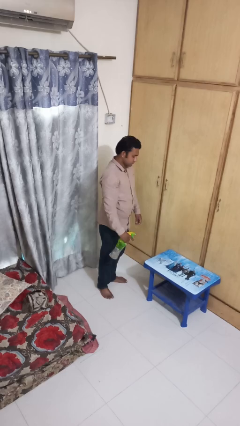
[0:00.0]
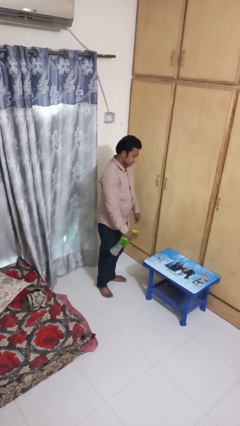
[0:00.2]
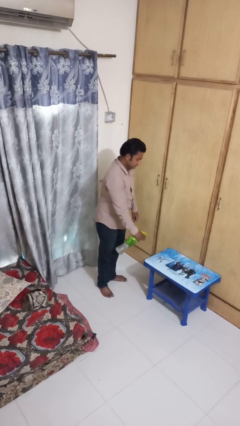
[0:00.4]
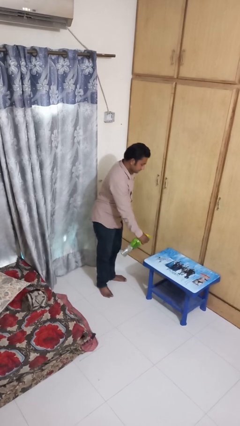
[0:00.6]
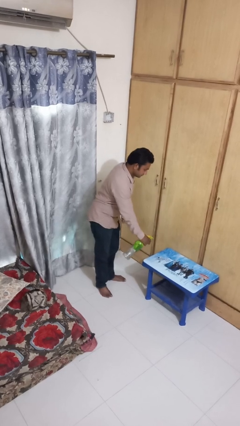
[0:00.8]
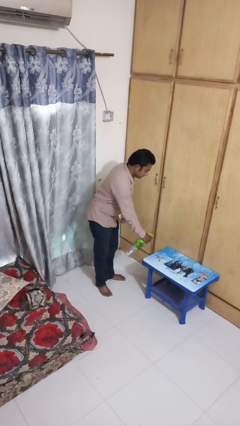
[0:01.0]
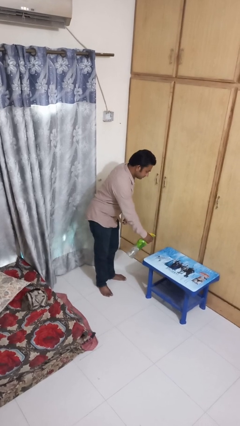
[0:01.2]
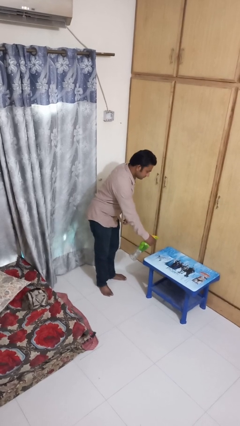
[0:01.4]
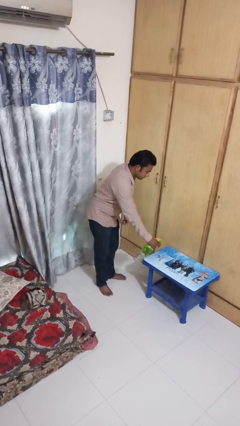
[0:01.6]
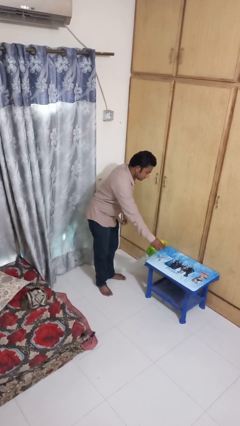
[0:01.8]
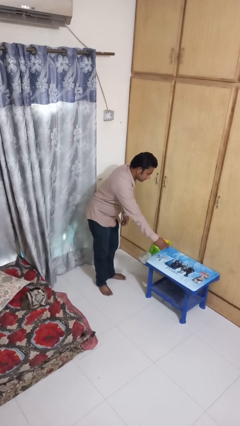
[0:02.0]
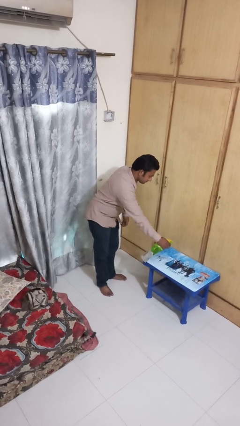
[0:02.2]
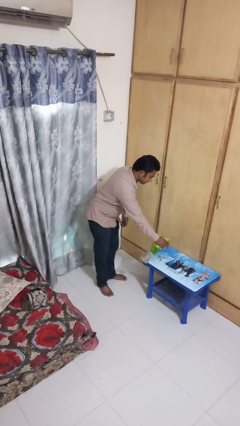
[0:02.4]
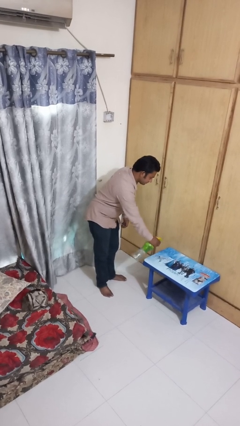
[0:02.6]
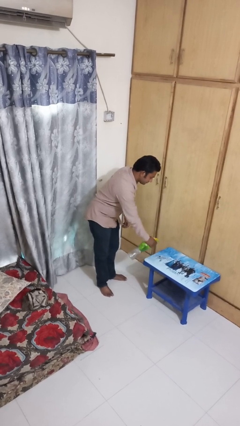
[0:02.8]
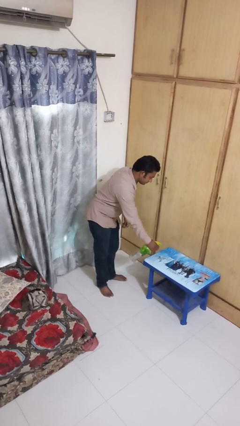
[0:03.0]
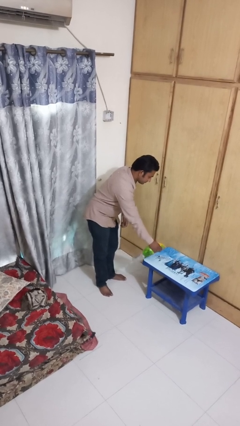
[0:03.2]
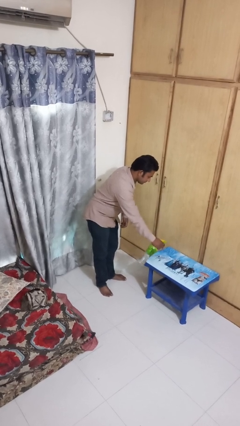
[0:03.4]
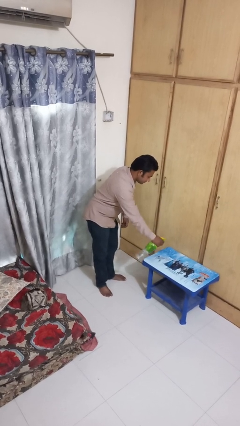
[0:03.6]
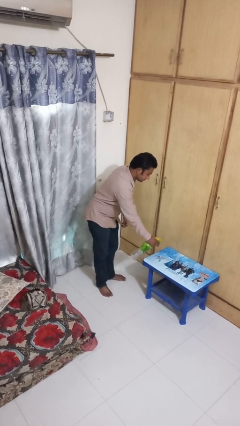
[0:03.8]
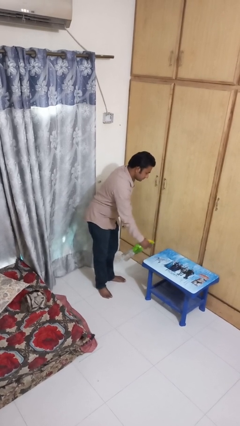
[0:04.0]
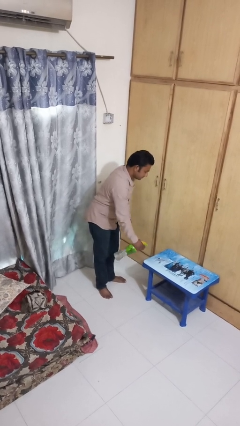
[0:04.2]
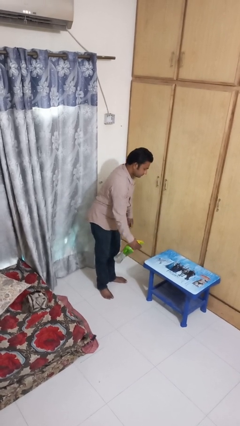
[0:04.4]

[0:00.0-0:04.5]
person sprays from bottle

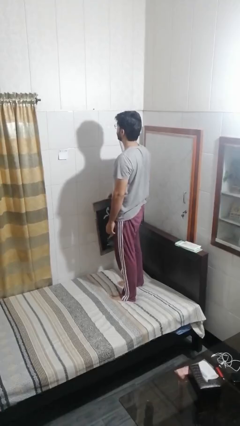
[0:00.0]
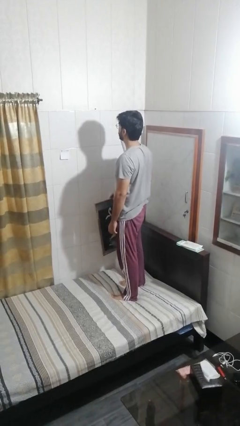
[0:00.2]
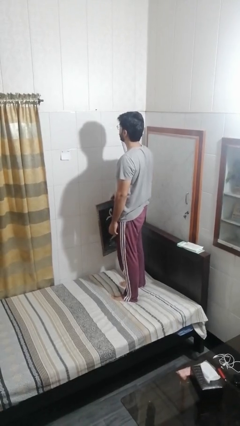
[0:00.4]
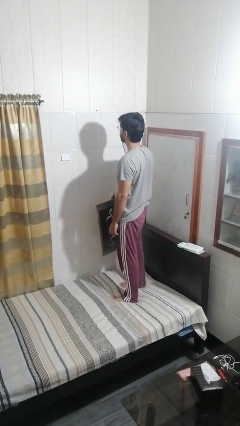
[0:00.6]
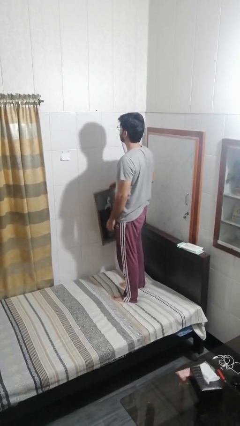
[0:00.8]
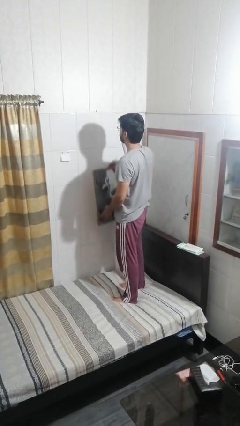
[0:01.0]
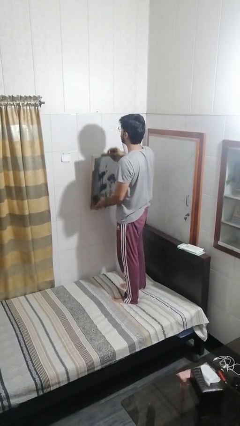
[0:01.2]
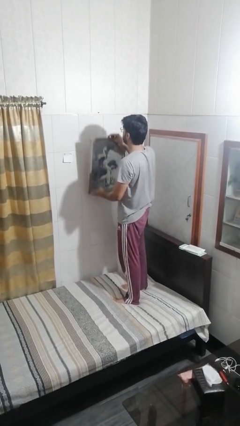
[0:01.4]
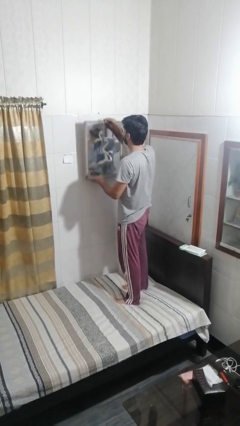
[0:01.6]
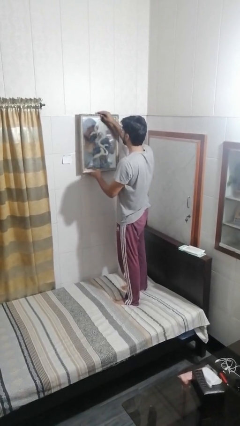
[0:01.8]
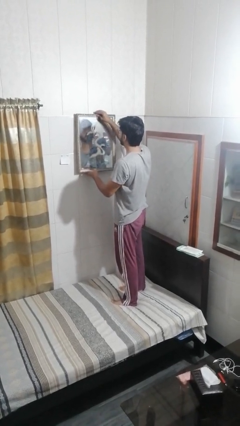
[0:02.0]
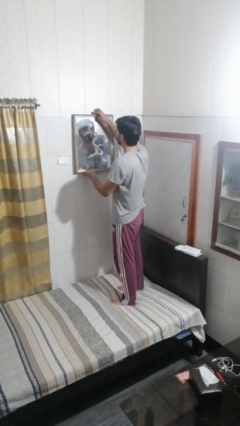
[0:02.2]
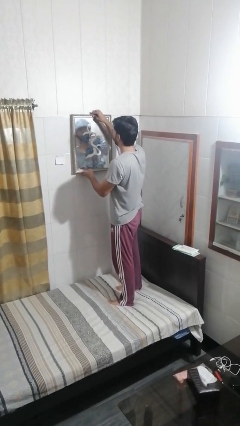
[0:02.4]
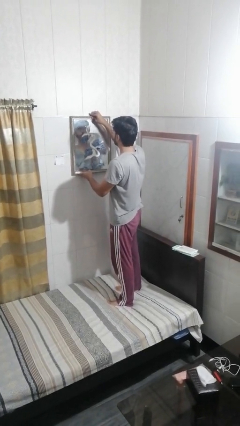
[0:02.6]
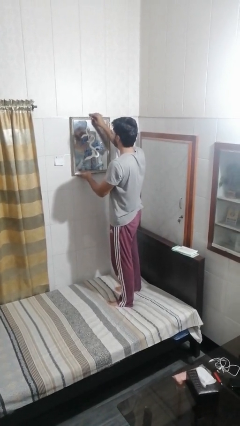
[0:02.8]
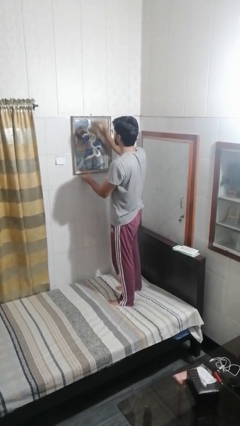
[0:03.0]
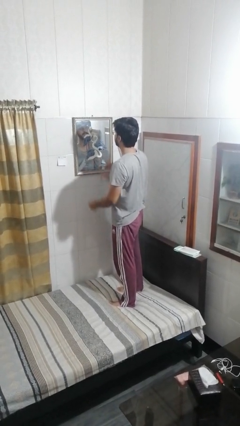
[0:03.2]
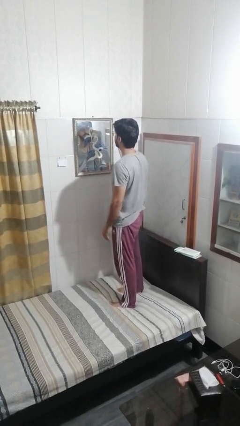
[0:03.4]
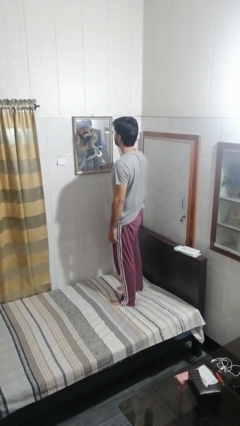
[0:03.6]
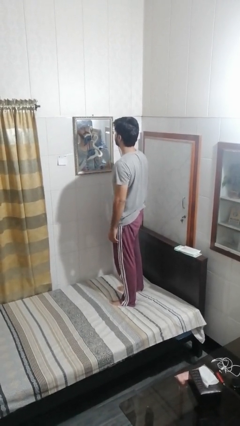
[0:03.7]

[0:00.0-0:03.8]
person puts up picture frame

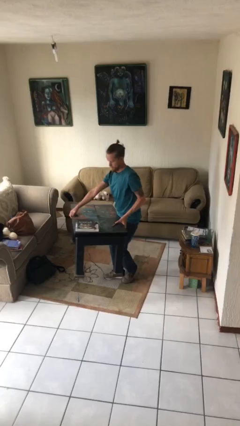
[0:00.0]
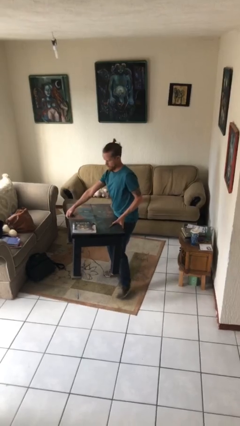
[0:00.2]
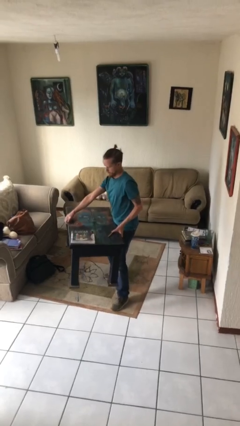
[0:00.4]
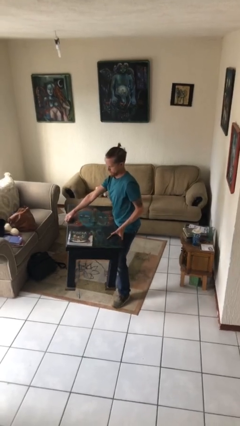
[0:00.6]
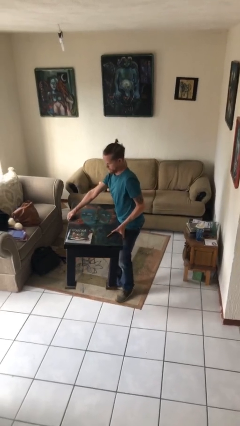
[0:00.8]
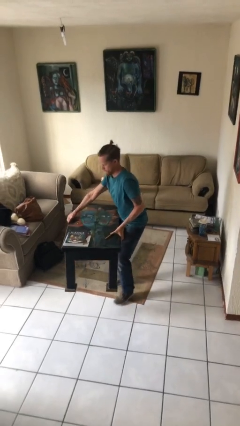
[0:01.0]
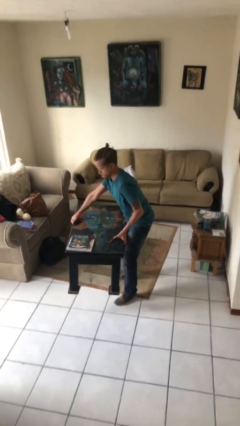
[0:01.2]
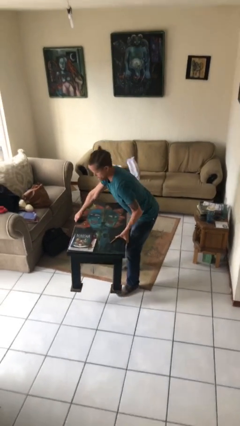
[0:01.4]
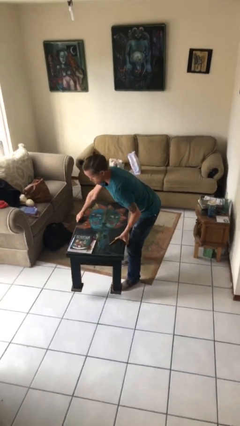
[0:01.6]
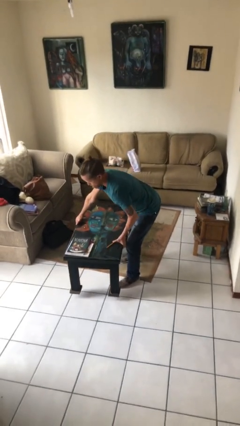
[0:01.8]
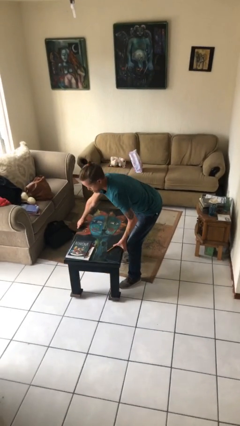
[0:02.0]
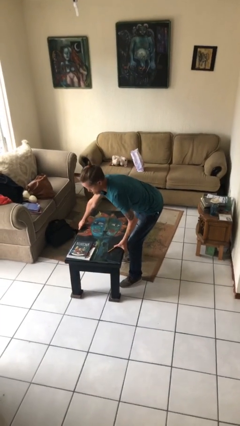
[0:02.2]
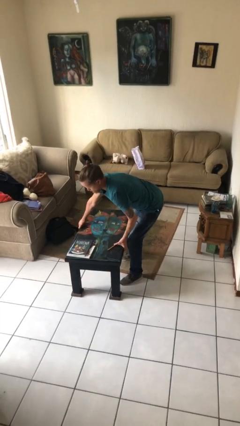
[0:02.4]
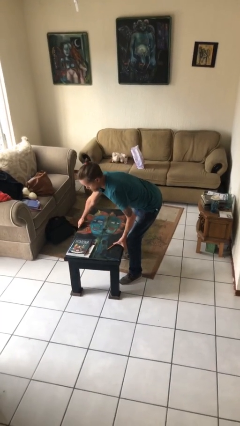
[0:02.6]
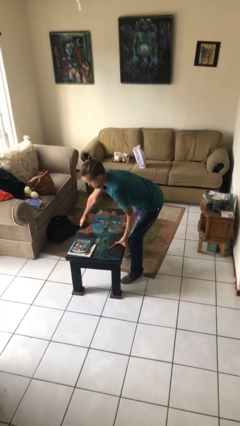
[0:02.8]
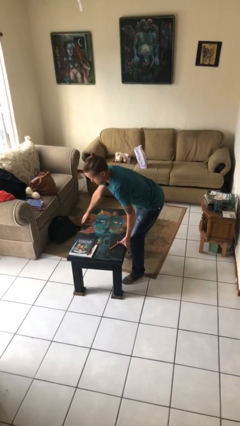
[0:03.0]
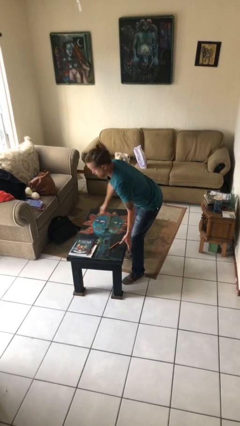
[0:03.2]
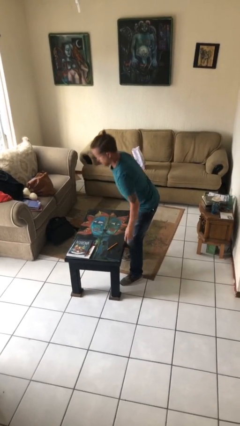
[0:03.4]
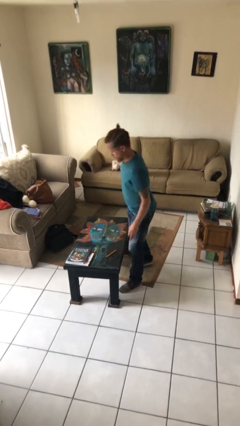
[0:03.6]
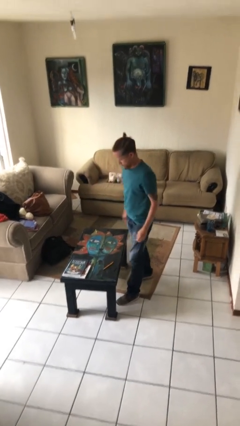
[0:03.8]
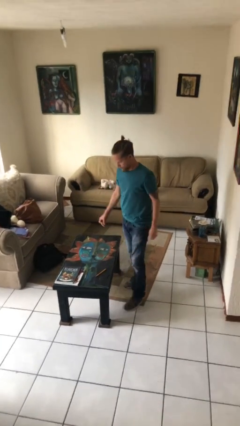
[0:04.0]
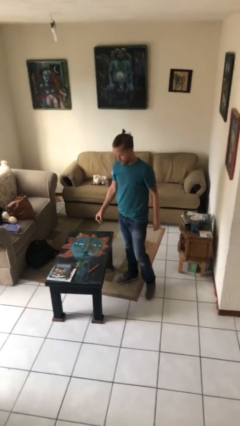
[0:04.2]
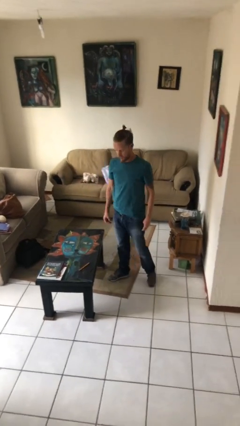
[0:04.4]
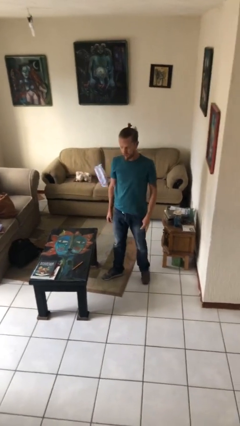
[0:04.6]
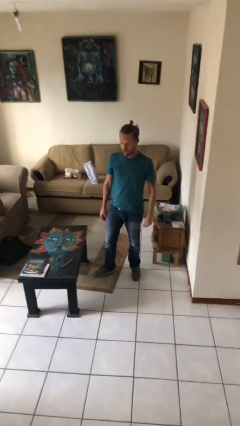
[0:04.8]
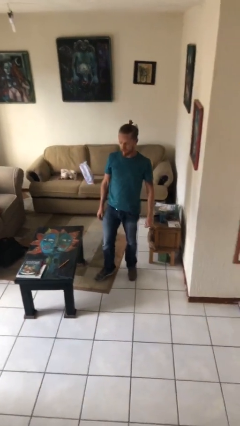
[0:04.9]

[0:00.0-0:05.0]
person puts down object on floor

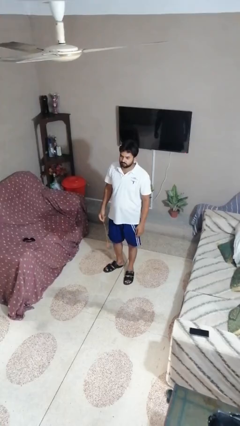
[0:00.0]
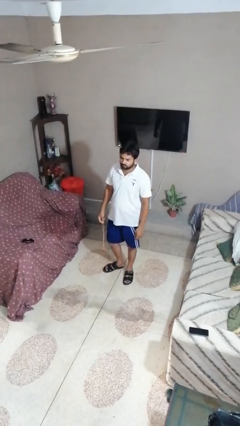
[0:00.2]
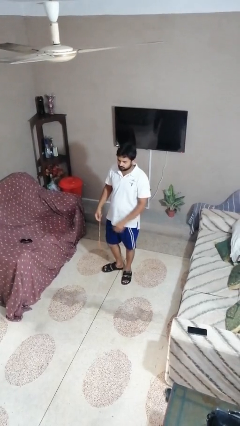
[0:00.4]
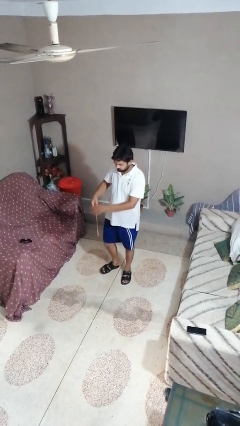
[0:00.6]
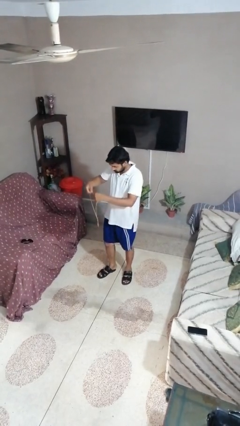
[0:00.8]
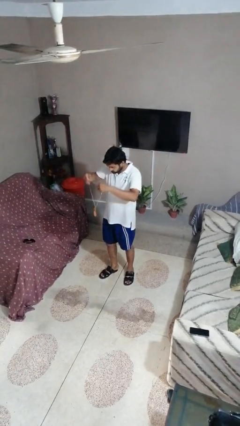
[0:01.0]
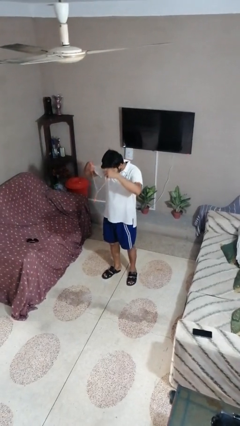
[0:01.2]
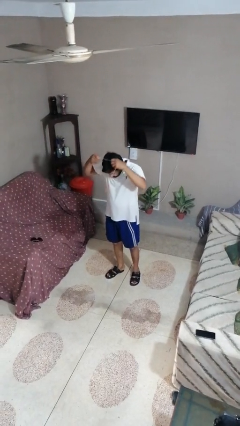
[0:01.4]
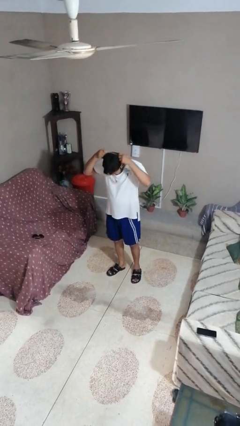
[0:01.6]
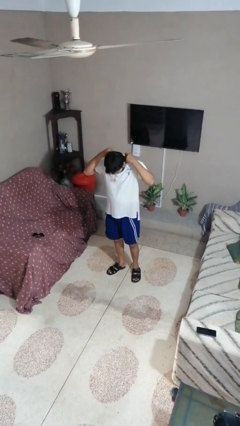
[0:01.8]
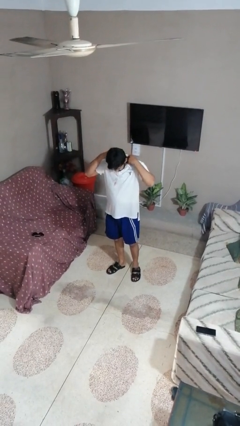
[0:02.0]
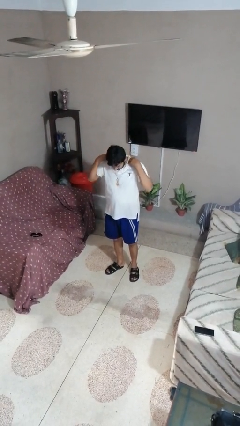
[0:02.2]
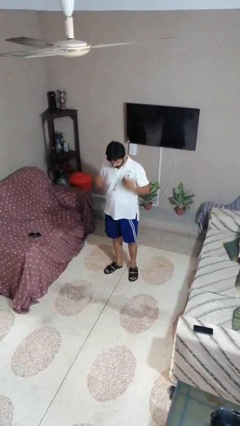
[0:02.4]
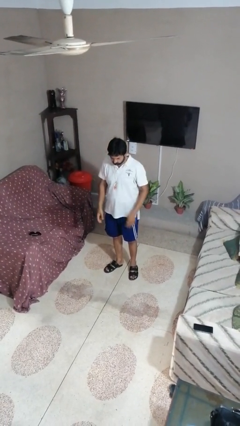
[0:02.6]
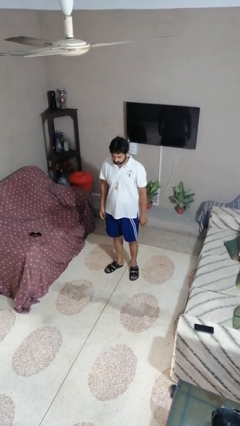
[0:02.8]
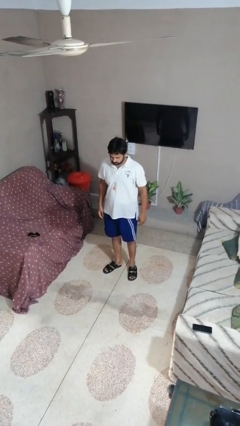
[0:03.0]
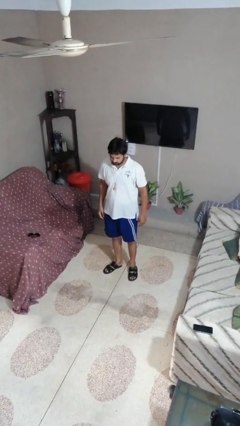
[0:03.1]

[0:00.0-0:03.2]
person puts on necklace

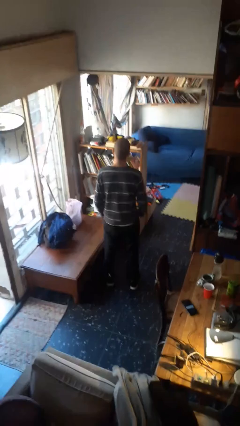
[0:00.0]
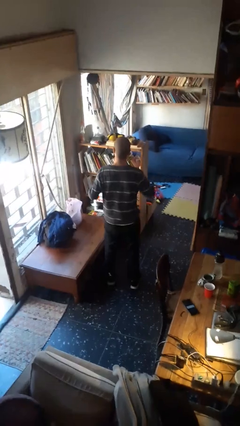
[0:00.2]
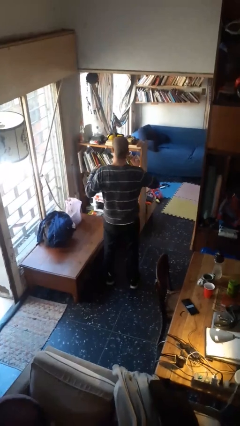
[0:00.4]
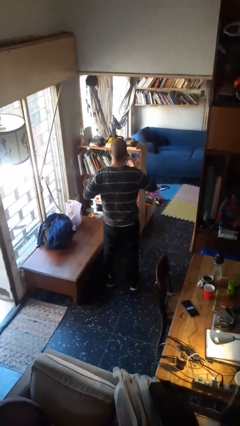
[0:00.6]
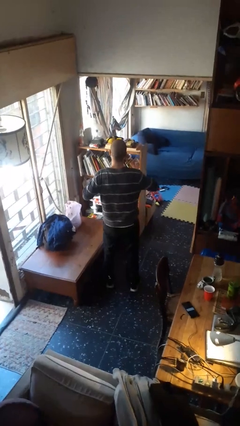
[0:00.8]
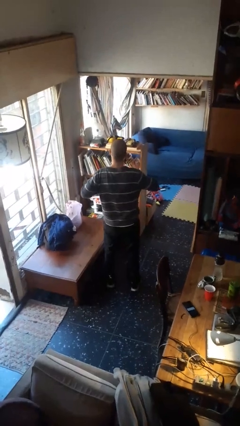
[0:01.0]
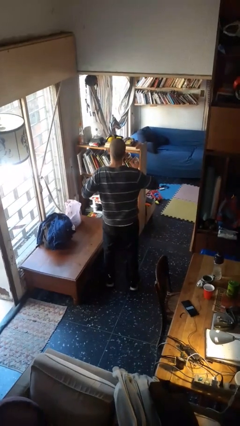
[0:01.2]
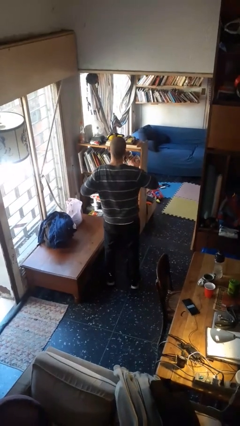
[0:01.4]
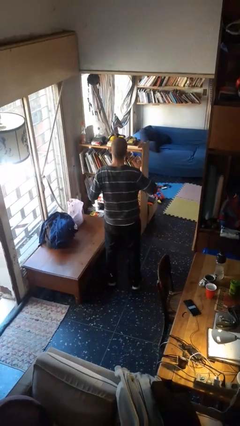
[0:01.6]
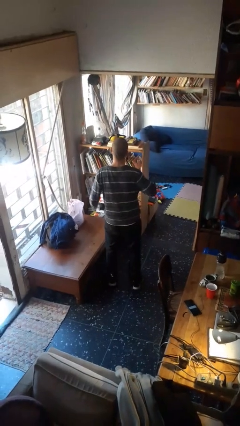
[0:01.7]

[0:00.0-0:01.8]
person drums on chest
